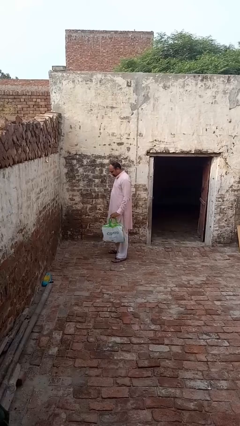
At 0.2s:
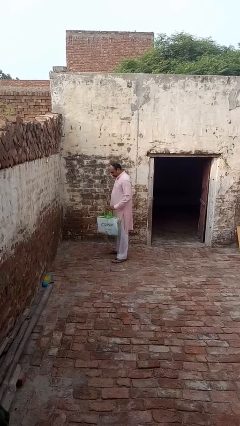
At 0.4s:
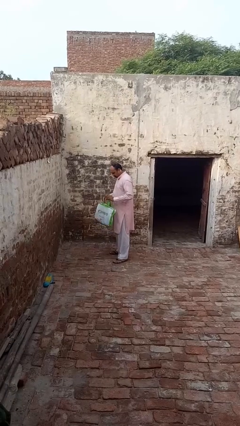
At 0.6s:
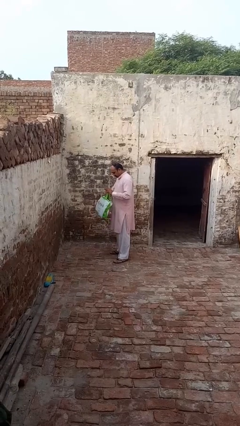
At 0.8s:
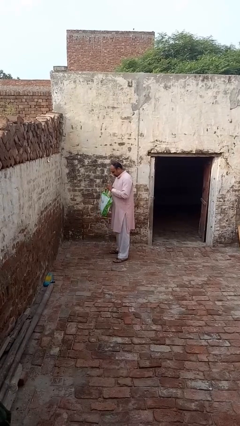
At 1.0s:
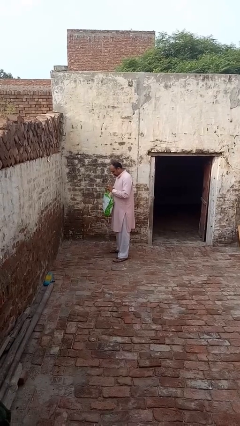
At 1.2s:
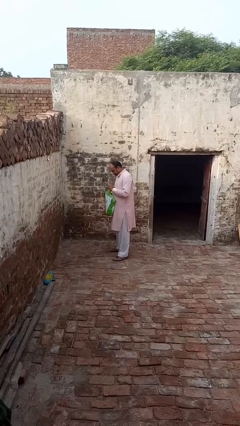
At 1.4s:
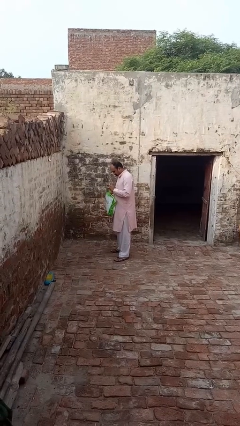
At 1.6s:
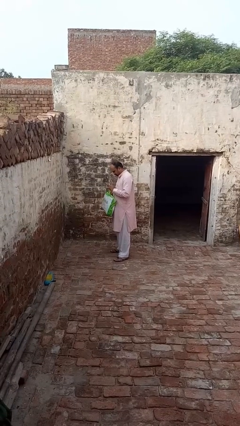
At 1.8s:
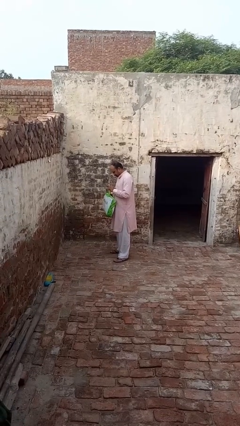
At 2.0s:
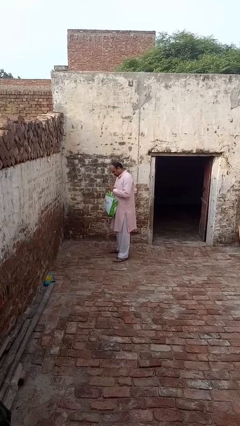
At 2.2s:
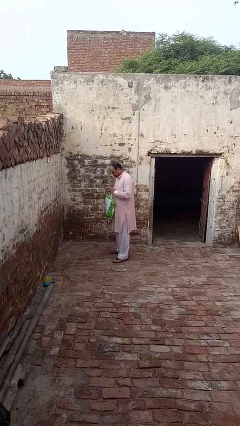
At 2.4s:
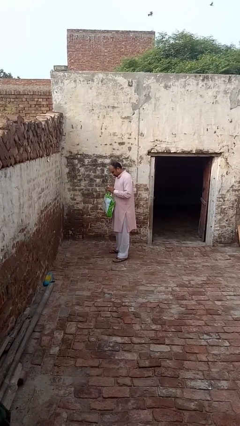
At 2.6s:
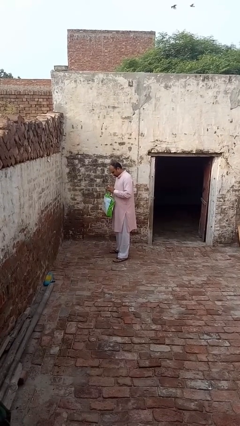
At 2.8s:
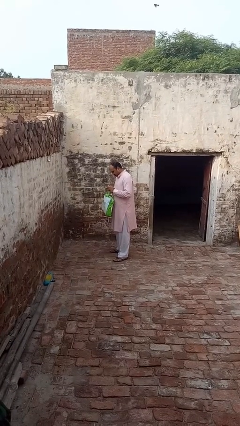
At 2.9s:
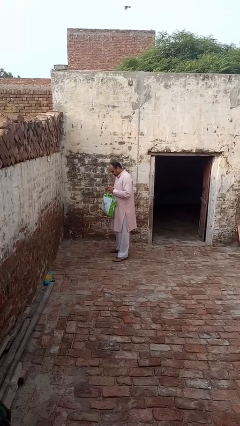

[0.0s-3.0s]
person searches in bag

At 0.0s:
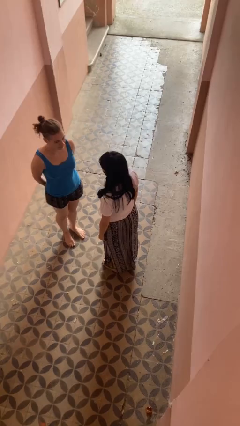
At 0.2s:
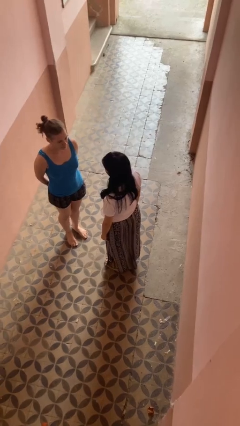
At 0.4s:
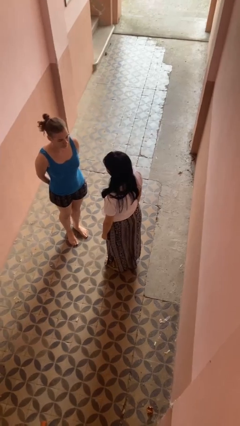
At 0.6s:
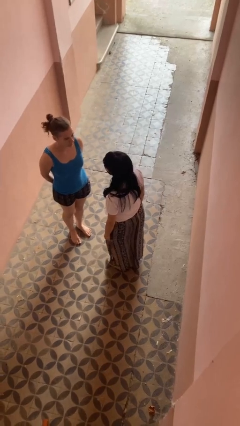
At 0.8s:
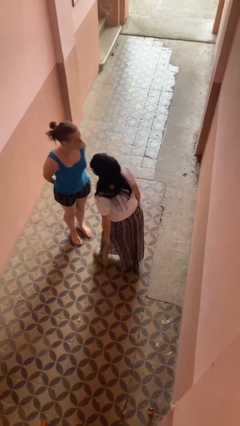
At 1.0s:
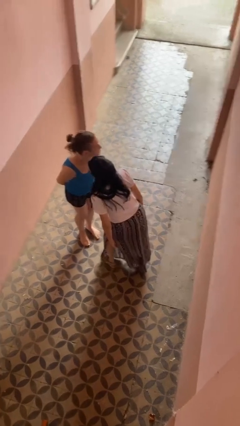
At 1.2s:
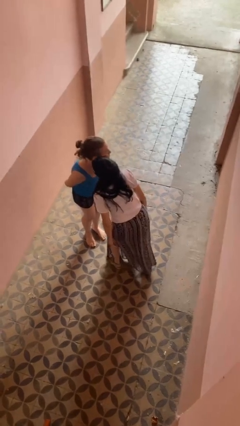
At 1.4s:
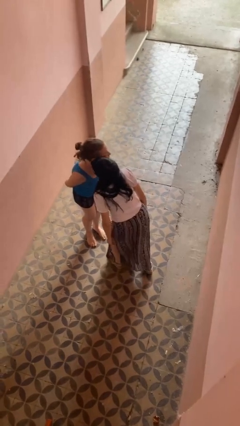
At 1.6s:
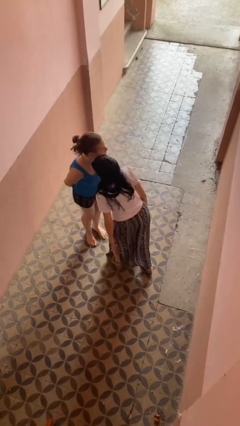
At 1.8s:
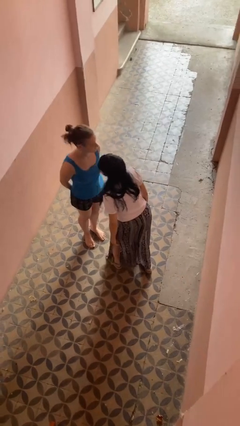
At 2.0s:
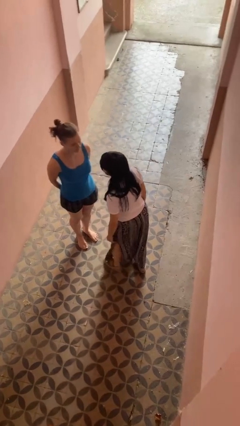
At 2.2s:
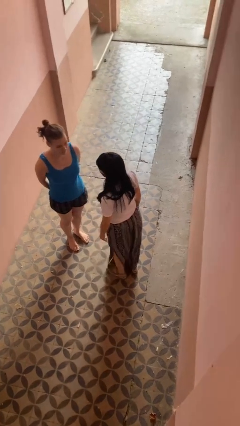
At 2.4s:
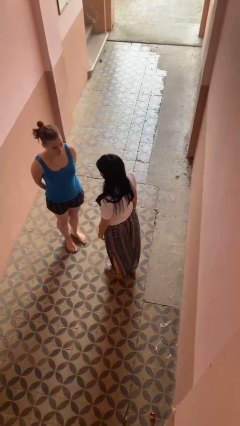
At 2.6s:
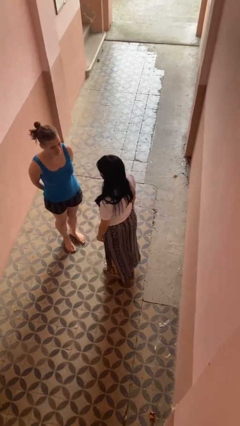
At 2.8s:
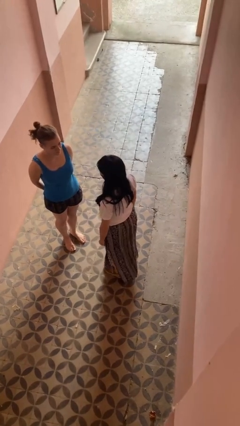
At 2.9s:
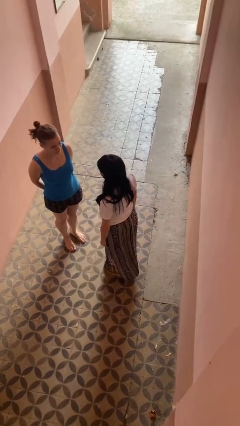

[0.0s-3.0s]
person kisses cheek of person

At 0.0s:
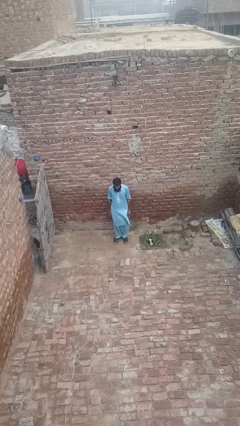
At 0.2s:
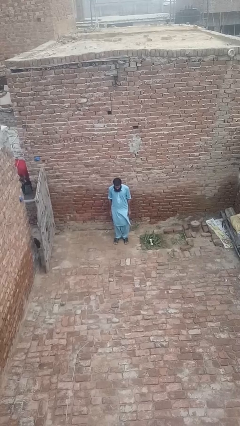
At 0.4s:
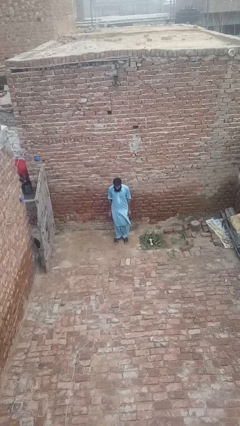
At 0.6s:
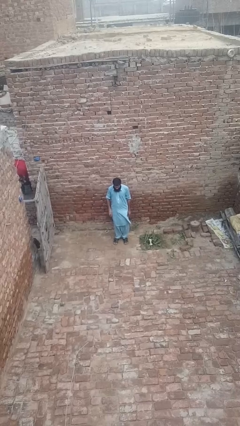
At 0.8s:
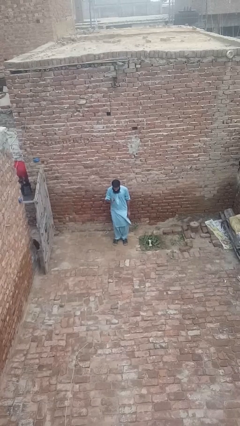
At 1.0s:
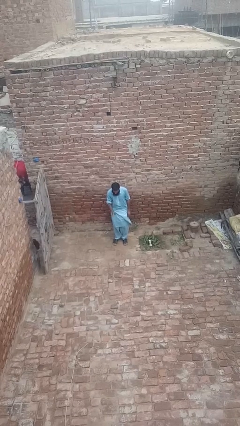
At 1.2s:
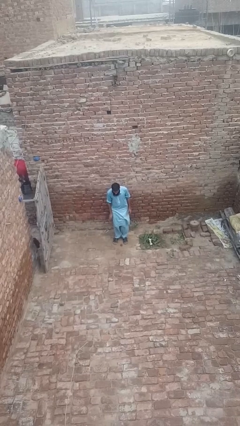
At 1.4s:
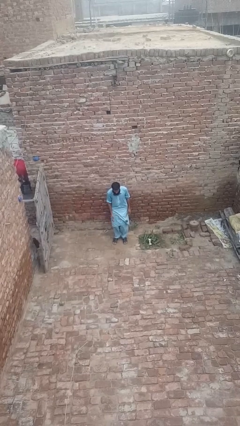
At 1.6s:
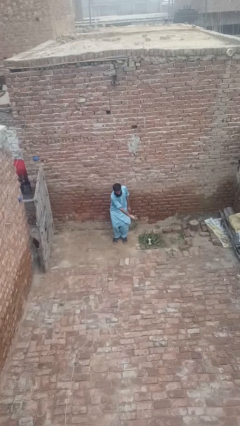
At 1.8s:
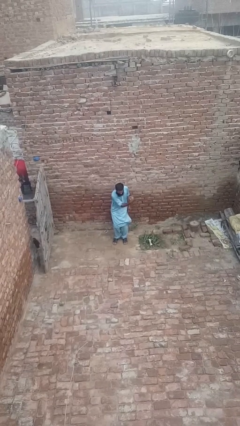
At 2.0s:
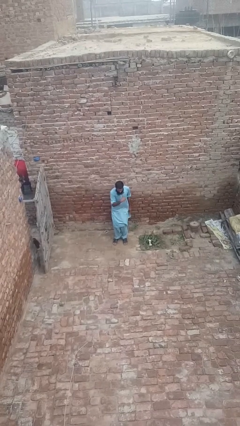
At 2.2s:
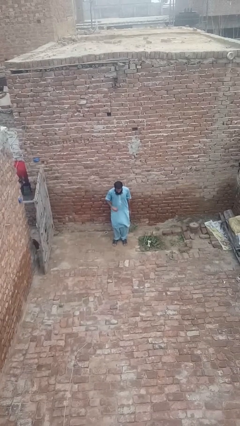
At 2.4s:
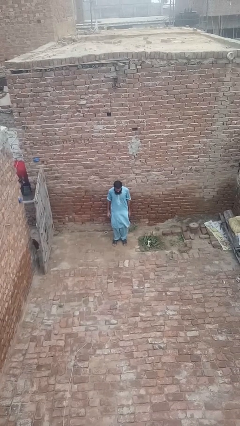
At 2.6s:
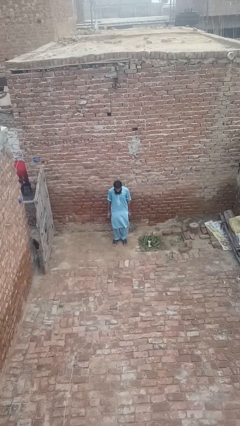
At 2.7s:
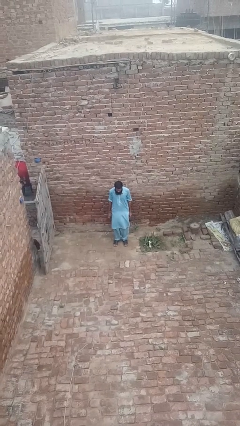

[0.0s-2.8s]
person bounces ball on floor

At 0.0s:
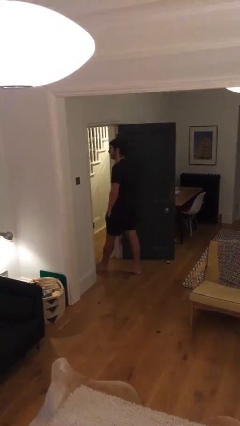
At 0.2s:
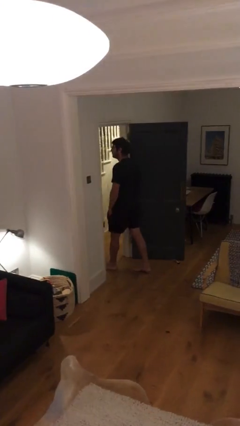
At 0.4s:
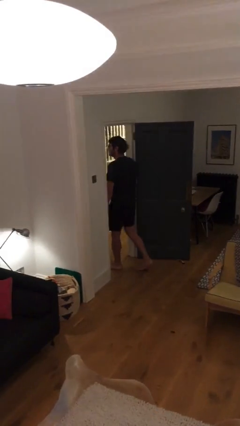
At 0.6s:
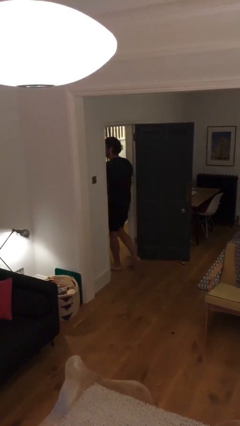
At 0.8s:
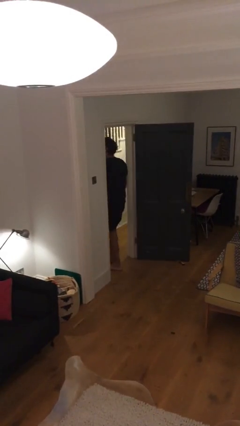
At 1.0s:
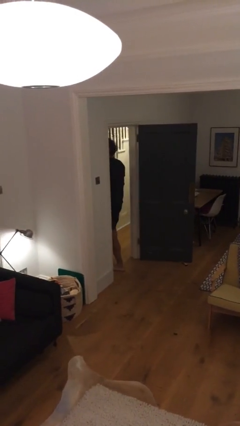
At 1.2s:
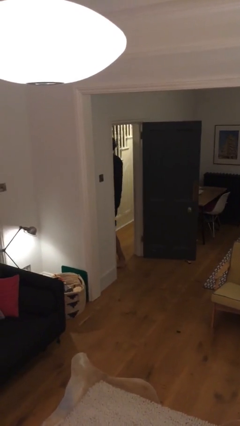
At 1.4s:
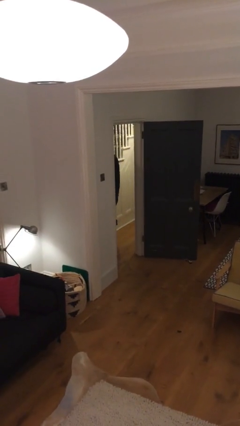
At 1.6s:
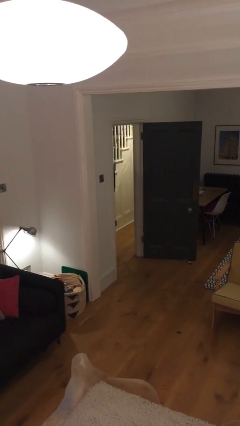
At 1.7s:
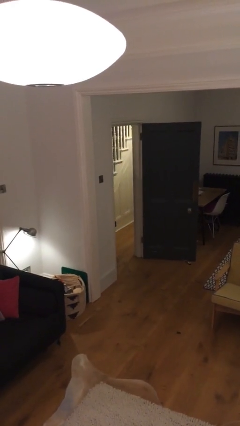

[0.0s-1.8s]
person exits scene through structure

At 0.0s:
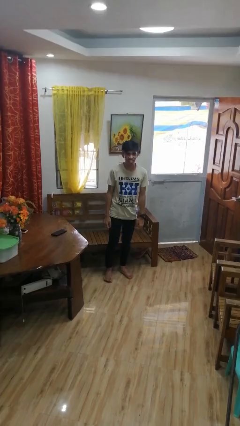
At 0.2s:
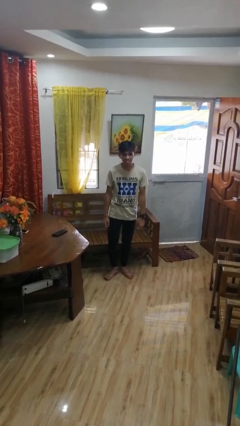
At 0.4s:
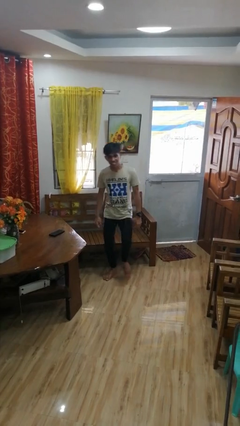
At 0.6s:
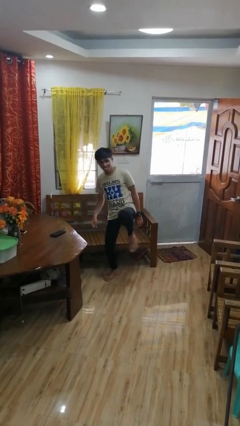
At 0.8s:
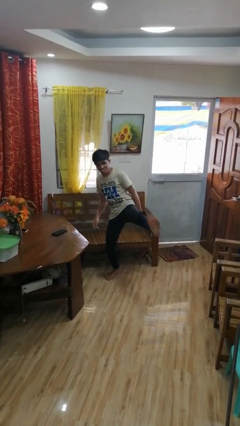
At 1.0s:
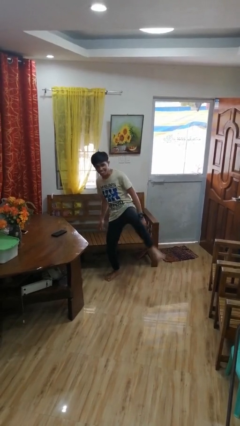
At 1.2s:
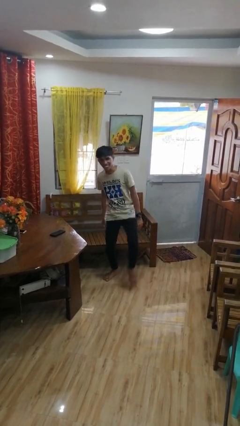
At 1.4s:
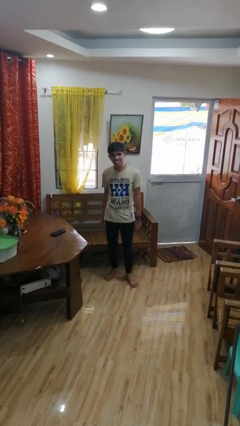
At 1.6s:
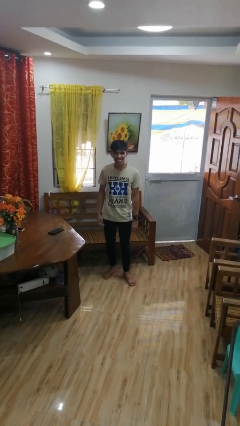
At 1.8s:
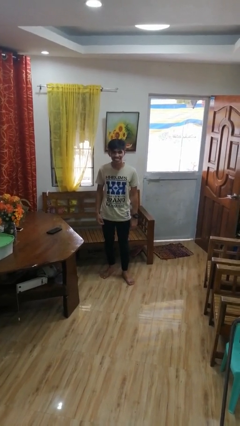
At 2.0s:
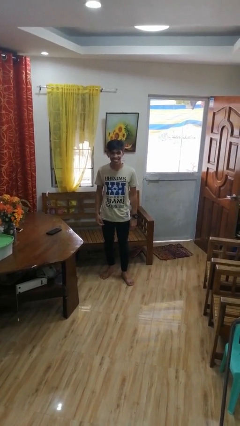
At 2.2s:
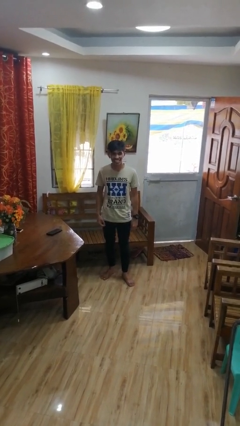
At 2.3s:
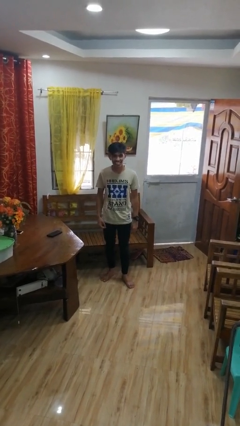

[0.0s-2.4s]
person karate kicks

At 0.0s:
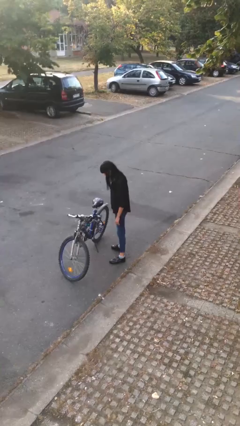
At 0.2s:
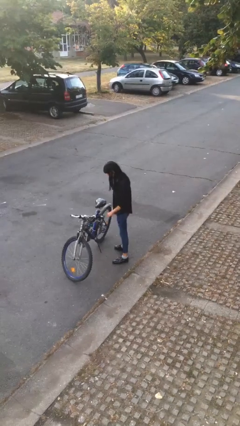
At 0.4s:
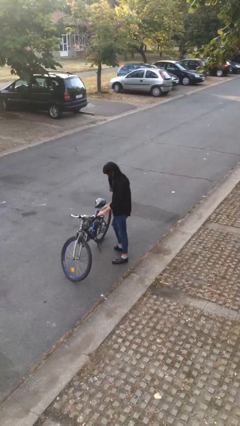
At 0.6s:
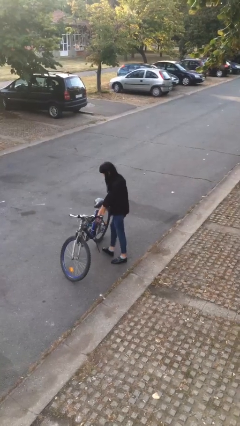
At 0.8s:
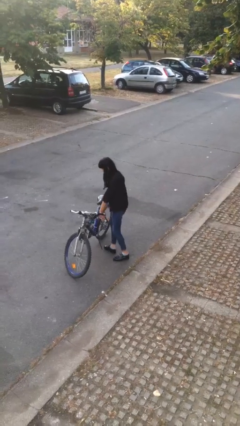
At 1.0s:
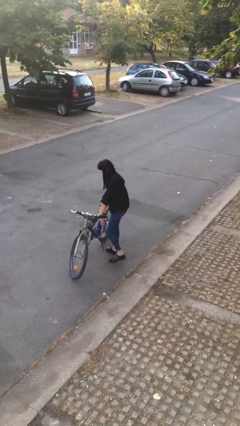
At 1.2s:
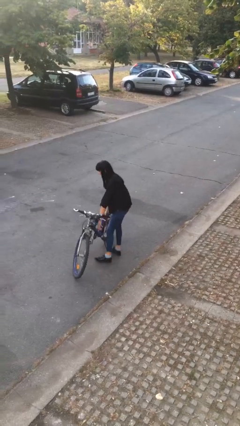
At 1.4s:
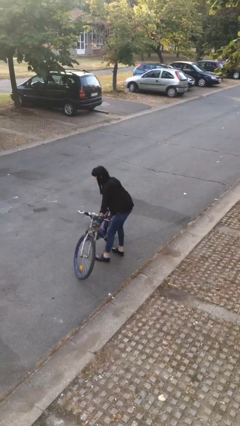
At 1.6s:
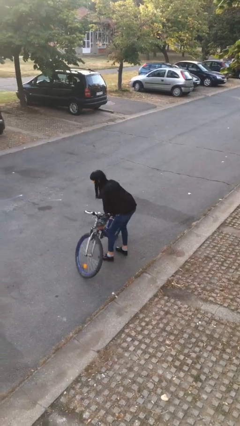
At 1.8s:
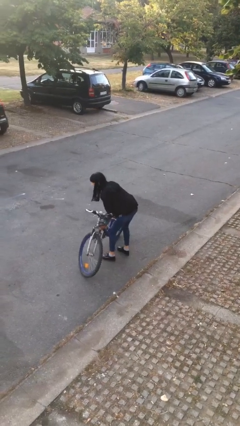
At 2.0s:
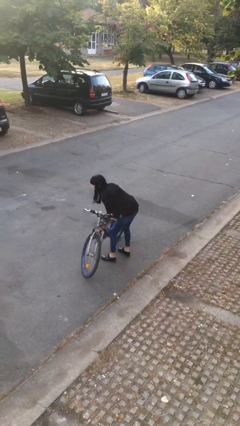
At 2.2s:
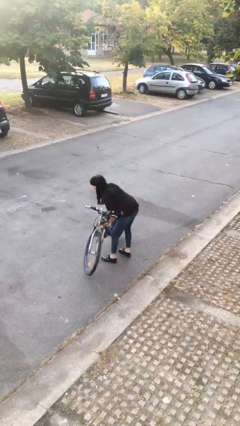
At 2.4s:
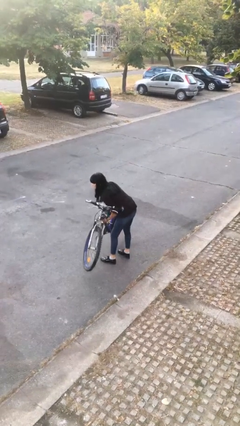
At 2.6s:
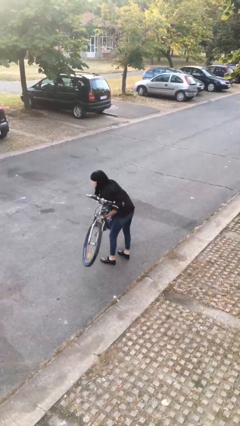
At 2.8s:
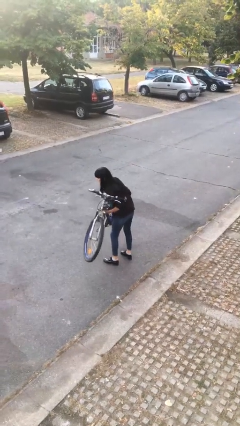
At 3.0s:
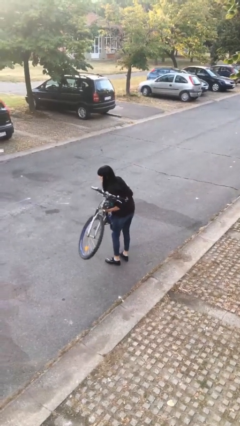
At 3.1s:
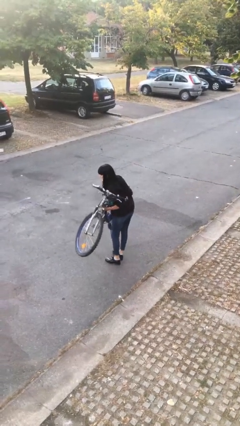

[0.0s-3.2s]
person picks up object from floor

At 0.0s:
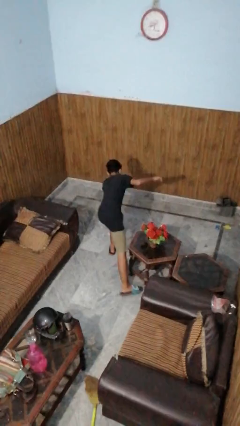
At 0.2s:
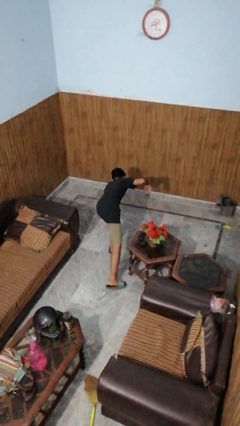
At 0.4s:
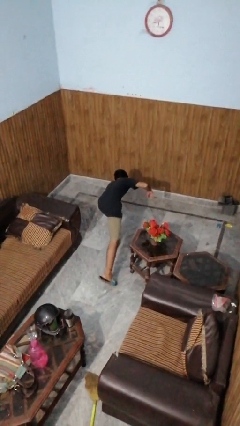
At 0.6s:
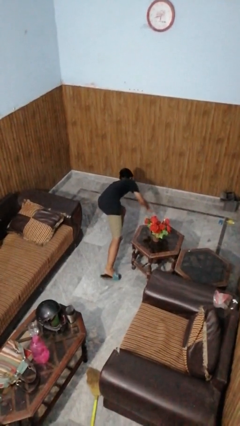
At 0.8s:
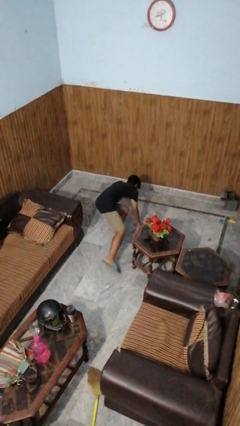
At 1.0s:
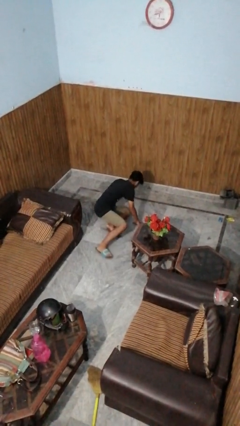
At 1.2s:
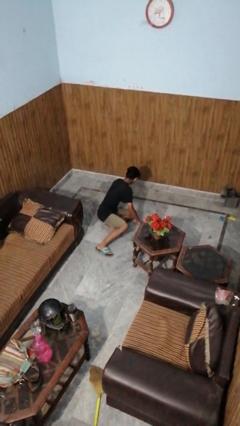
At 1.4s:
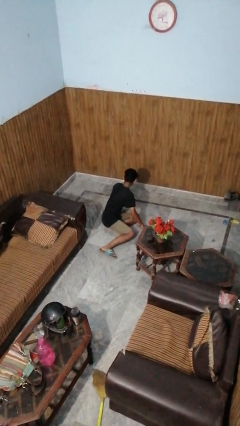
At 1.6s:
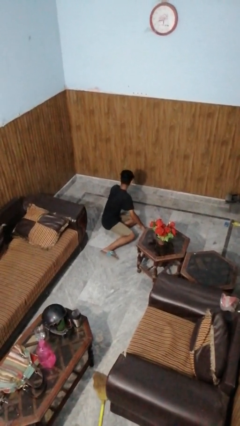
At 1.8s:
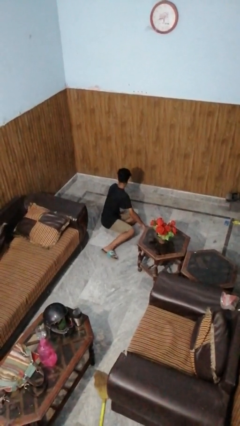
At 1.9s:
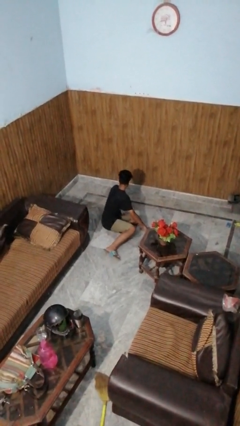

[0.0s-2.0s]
person lies down on floor
